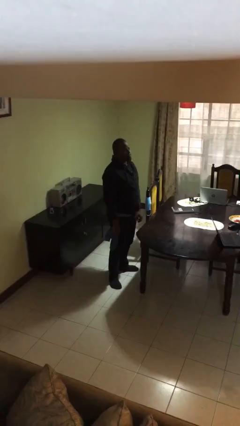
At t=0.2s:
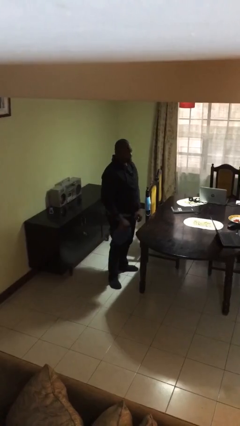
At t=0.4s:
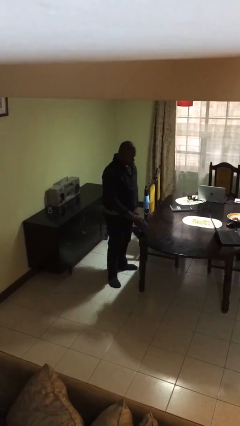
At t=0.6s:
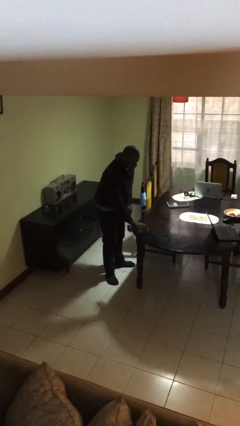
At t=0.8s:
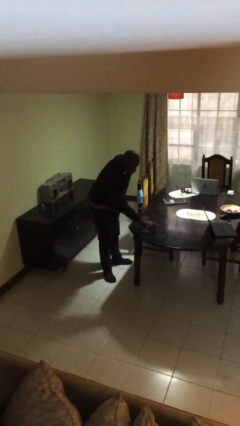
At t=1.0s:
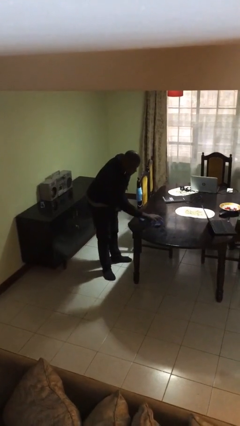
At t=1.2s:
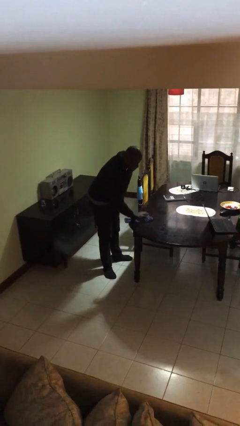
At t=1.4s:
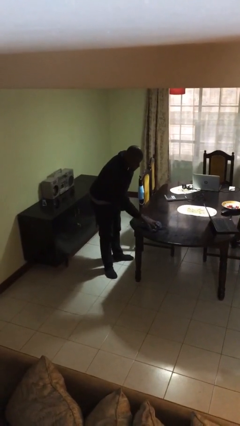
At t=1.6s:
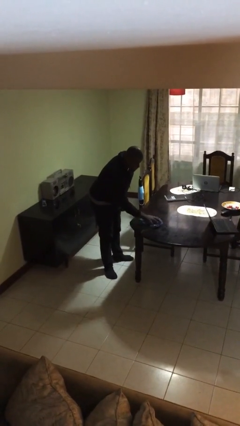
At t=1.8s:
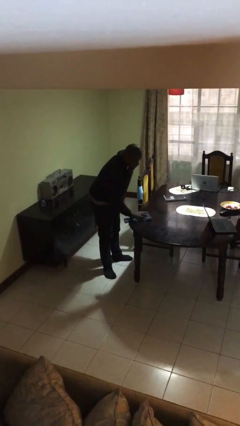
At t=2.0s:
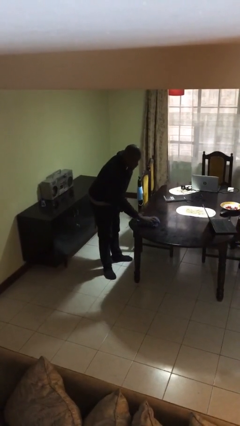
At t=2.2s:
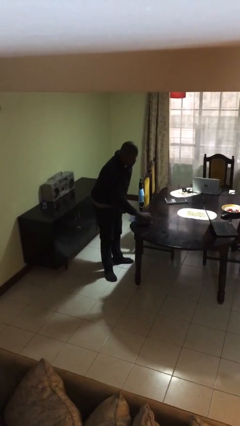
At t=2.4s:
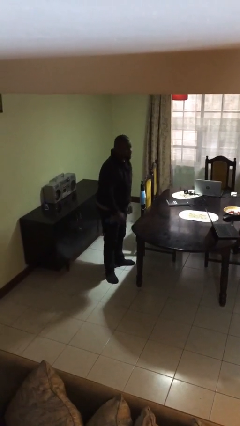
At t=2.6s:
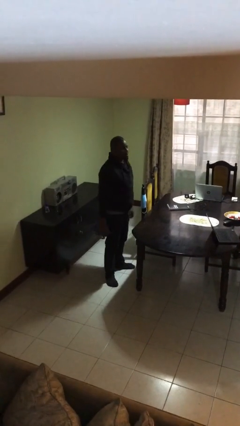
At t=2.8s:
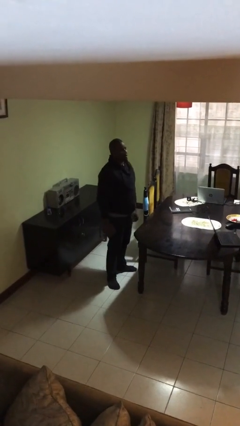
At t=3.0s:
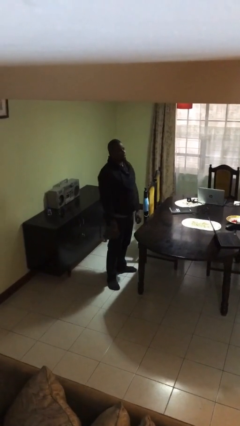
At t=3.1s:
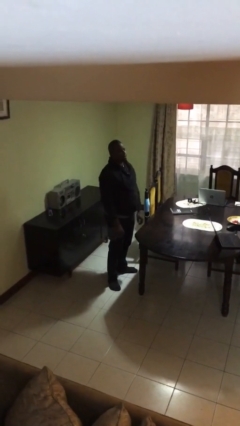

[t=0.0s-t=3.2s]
person cleans table with rag

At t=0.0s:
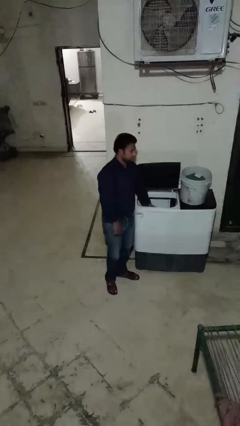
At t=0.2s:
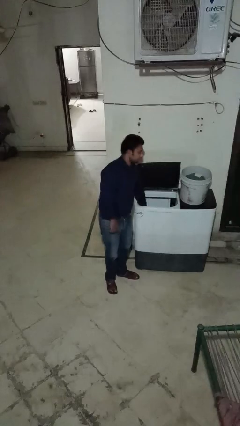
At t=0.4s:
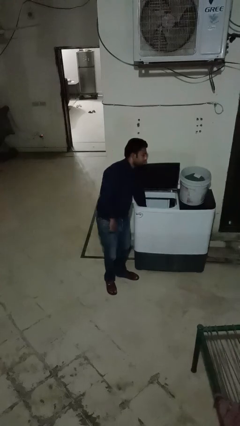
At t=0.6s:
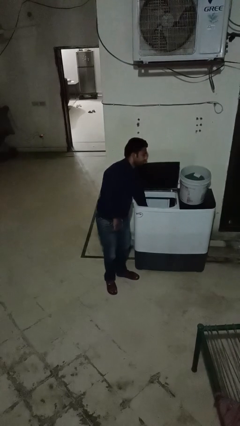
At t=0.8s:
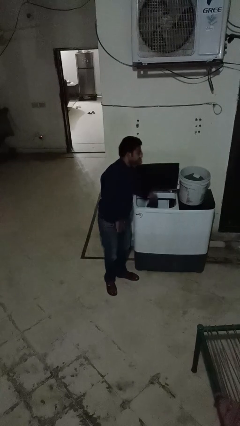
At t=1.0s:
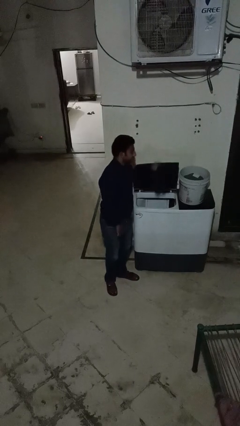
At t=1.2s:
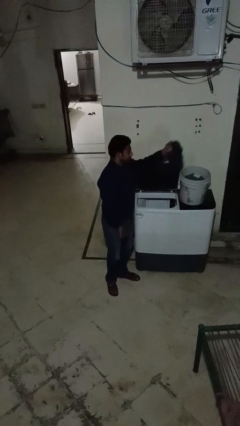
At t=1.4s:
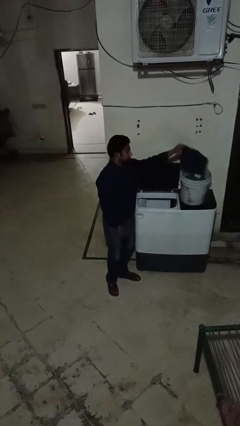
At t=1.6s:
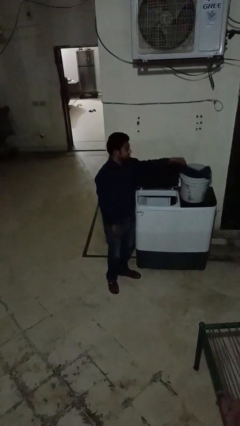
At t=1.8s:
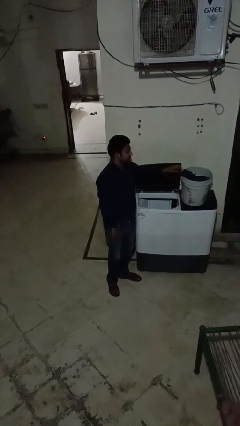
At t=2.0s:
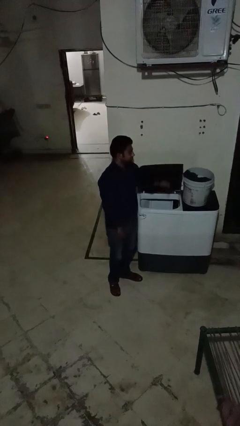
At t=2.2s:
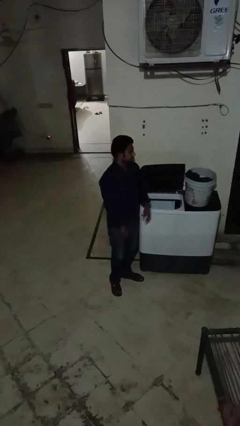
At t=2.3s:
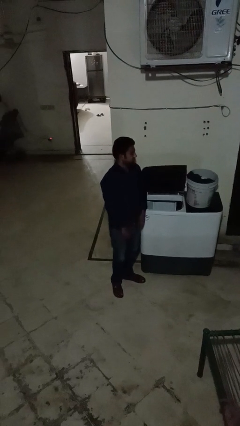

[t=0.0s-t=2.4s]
person unloads clotheswasher

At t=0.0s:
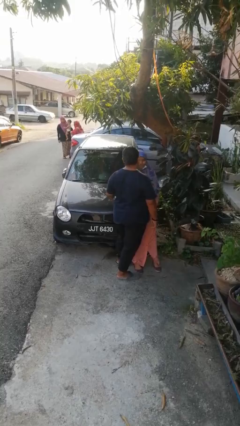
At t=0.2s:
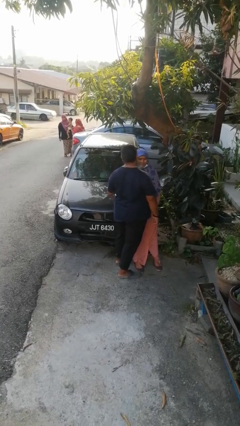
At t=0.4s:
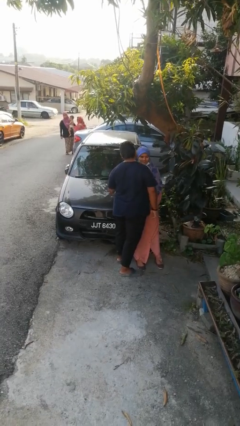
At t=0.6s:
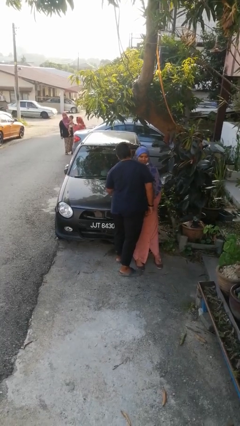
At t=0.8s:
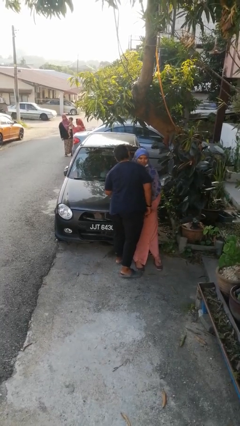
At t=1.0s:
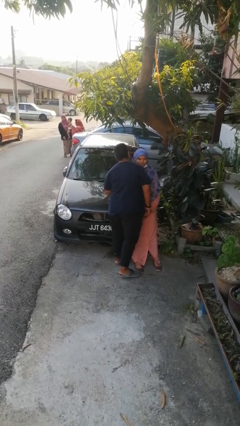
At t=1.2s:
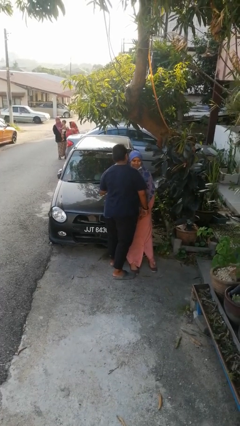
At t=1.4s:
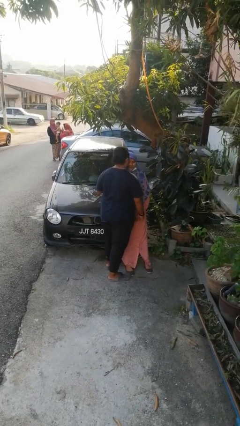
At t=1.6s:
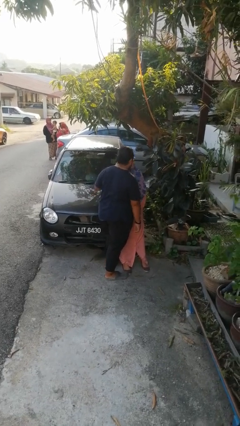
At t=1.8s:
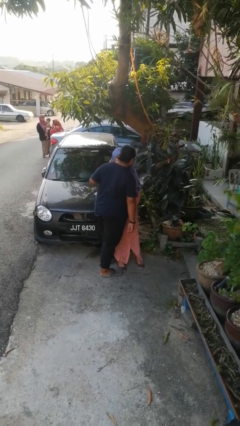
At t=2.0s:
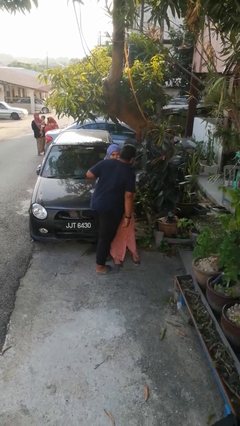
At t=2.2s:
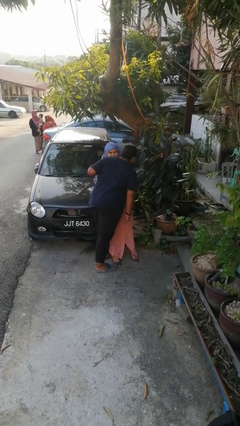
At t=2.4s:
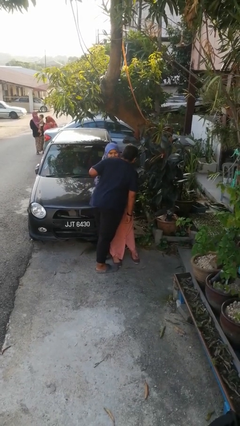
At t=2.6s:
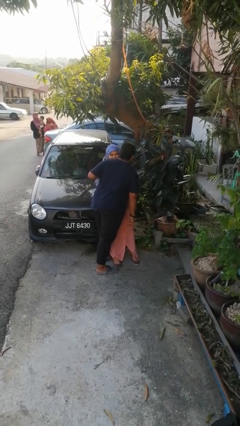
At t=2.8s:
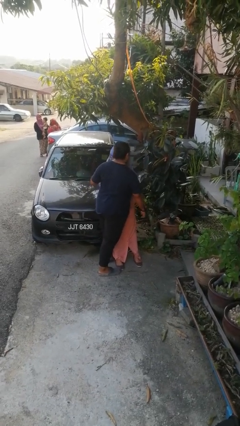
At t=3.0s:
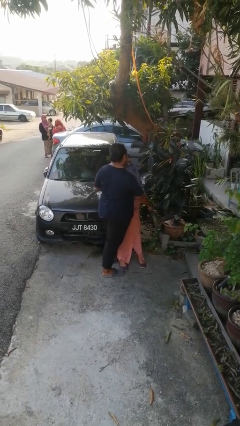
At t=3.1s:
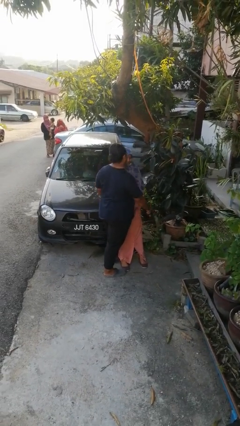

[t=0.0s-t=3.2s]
person kisses cheek of person

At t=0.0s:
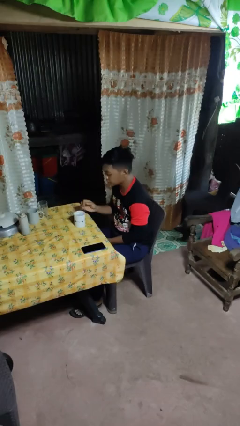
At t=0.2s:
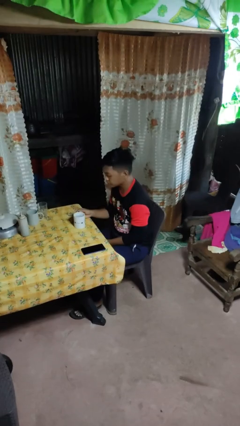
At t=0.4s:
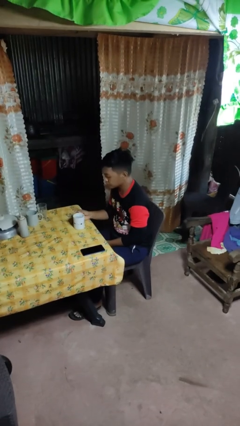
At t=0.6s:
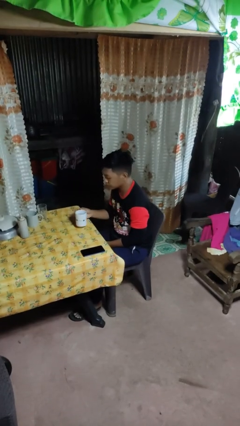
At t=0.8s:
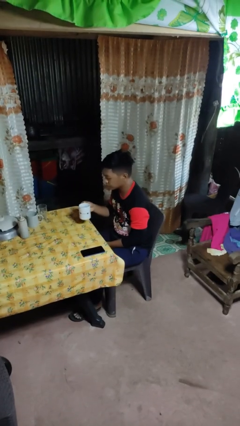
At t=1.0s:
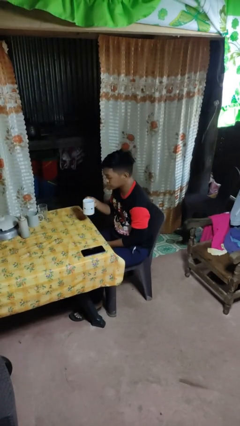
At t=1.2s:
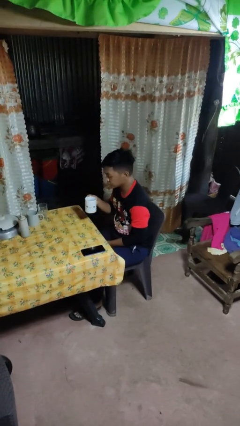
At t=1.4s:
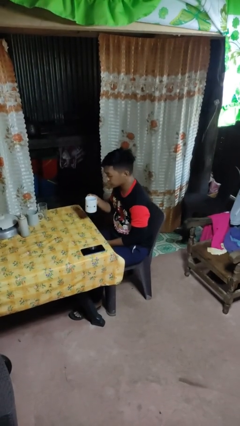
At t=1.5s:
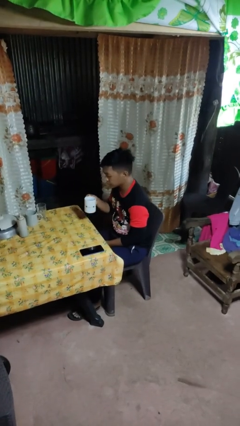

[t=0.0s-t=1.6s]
person picks up object from table

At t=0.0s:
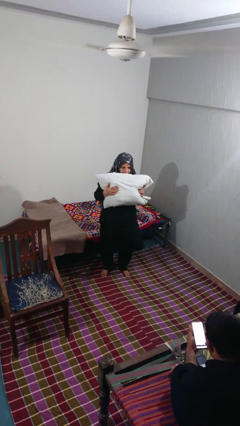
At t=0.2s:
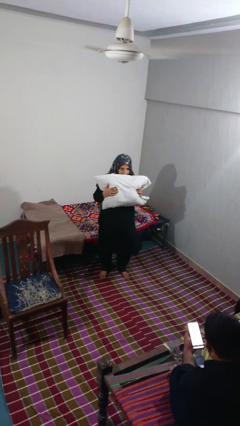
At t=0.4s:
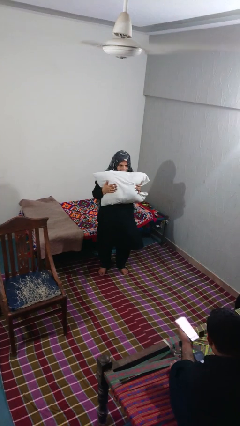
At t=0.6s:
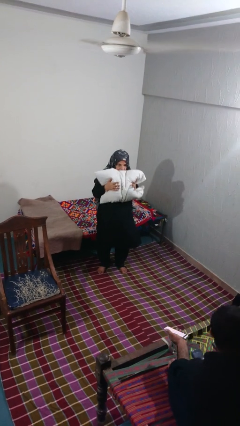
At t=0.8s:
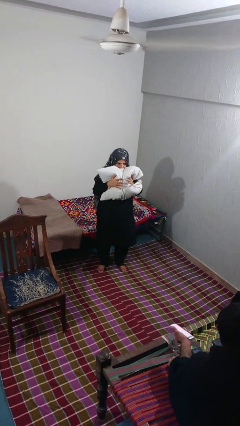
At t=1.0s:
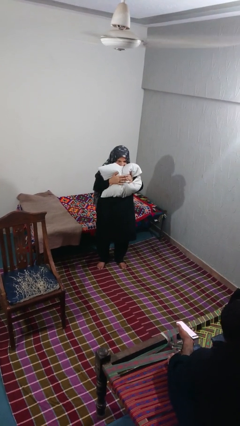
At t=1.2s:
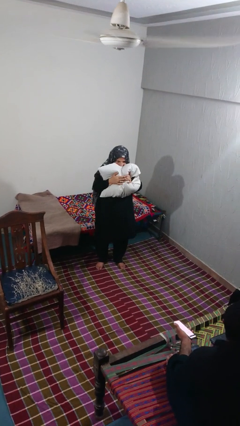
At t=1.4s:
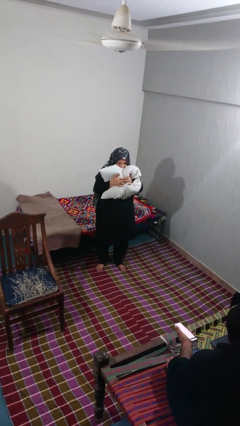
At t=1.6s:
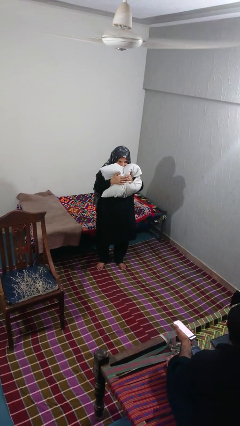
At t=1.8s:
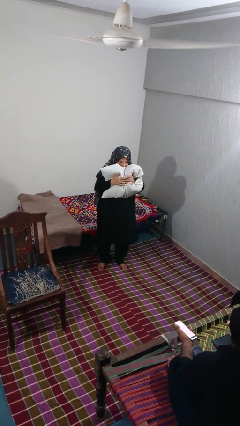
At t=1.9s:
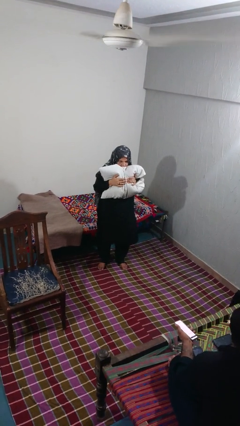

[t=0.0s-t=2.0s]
person squeezes object

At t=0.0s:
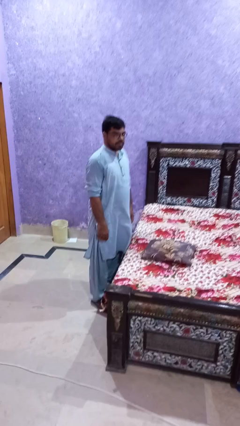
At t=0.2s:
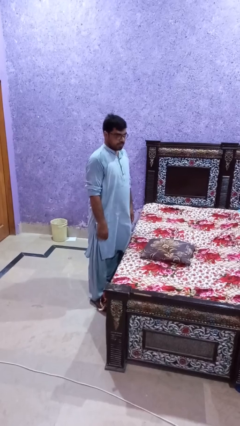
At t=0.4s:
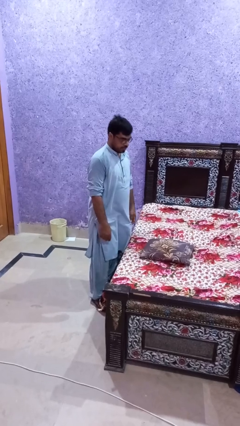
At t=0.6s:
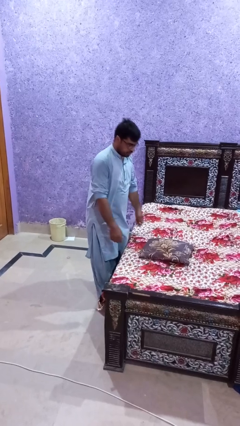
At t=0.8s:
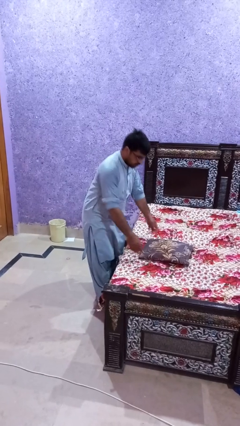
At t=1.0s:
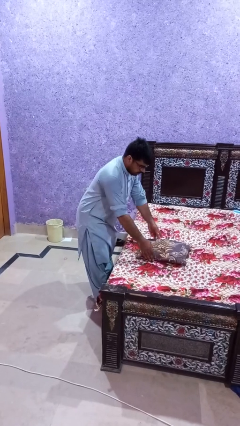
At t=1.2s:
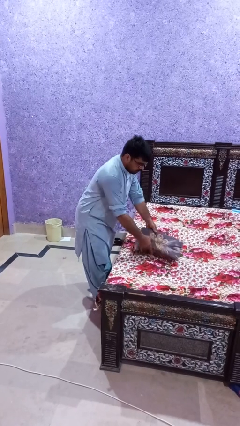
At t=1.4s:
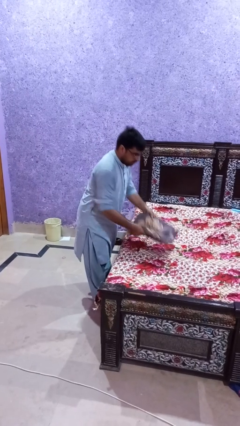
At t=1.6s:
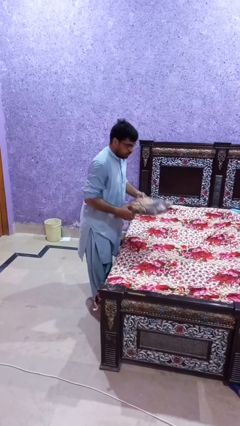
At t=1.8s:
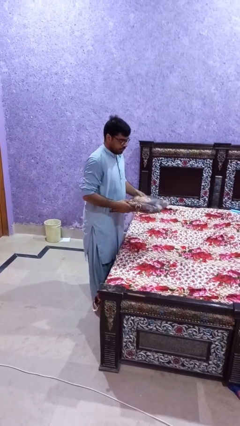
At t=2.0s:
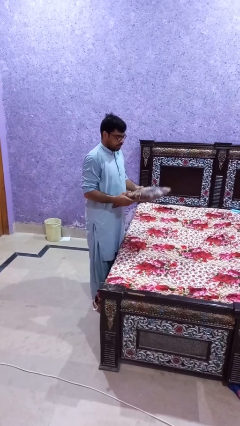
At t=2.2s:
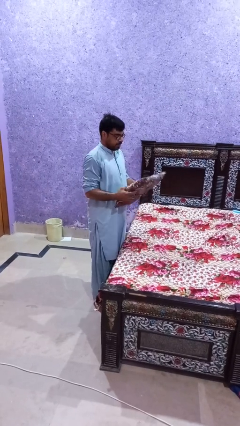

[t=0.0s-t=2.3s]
person picks up object from bed

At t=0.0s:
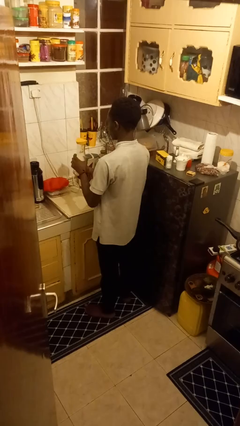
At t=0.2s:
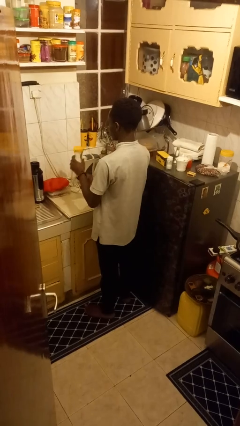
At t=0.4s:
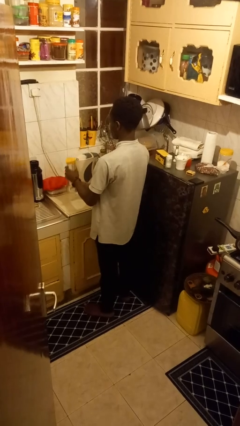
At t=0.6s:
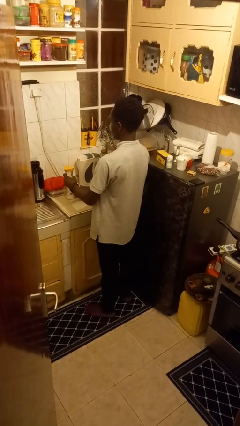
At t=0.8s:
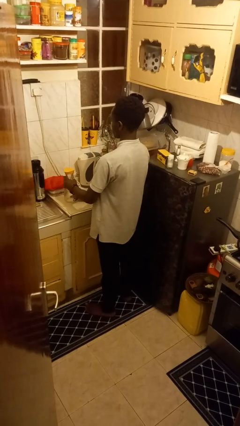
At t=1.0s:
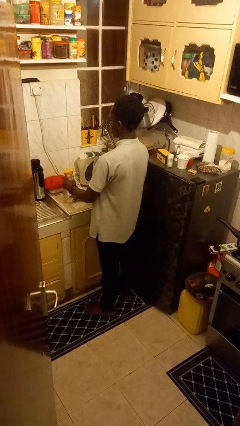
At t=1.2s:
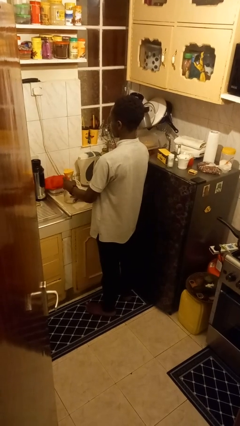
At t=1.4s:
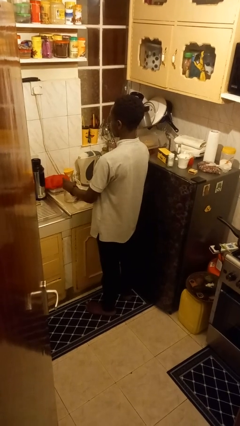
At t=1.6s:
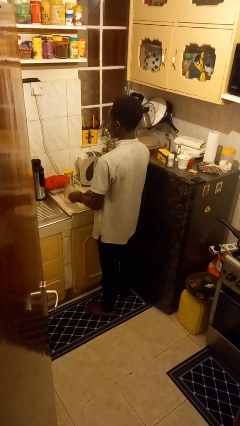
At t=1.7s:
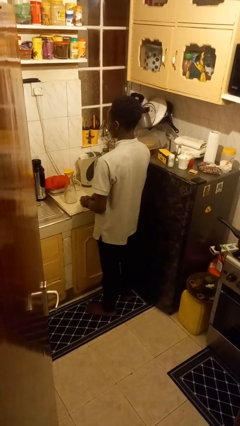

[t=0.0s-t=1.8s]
person puts down object on countertop

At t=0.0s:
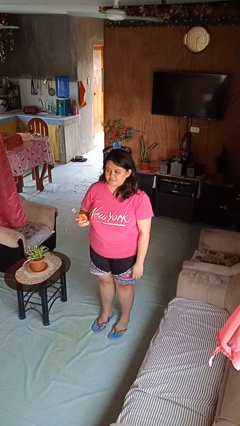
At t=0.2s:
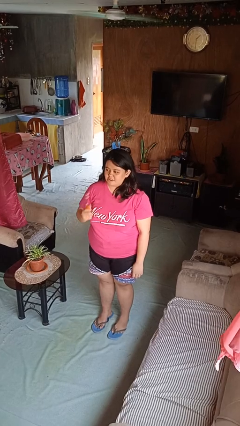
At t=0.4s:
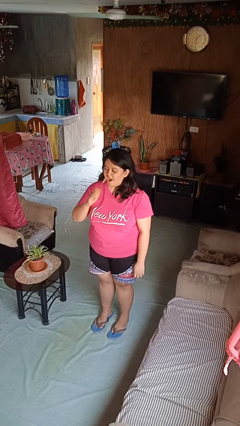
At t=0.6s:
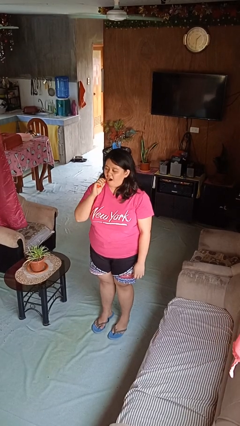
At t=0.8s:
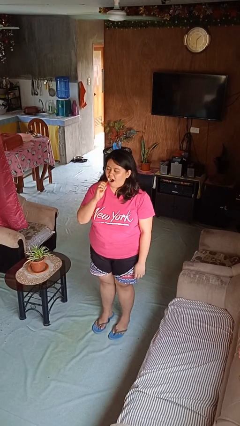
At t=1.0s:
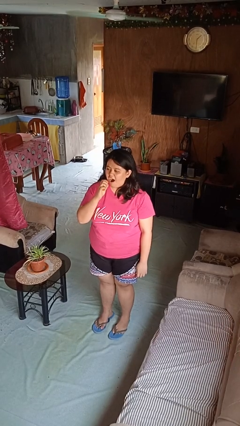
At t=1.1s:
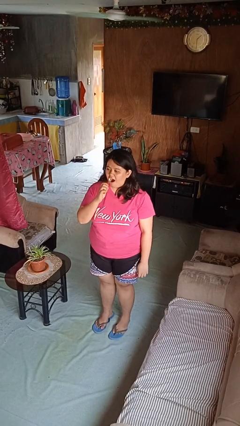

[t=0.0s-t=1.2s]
person brushes teeth
